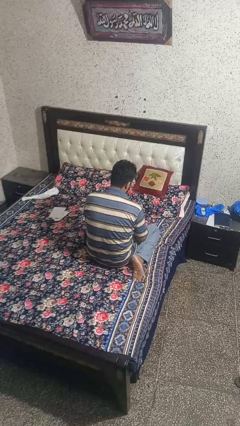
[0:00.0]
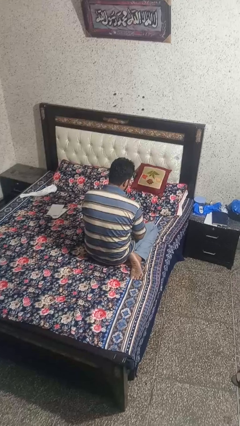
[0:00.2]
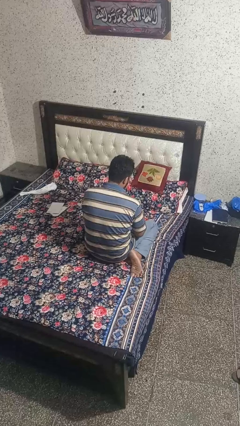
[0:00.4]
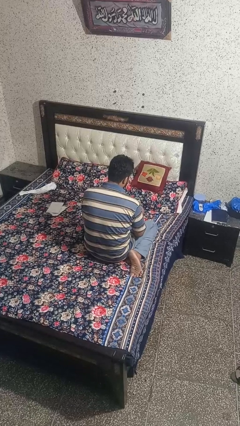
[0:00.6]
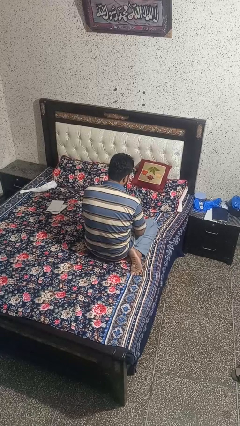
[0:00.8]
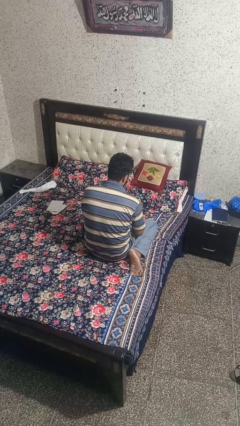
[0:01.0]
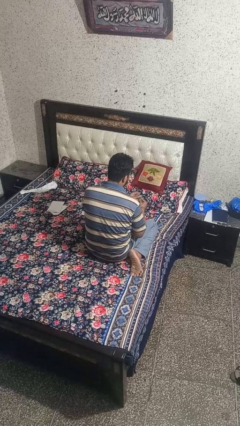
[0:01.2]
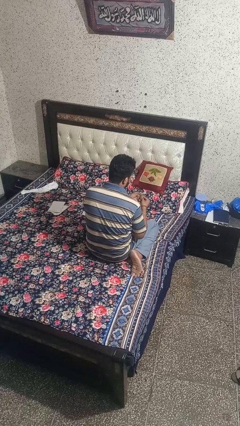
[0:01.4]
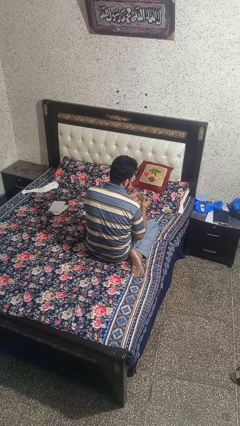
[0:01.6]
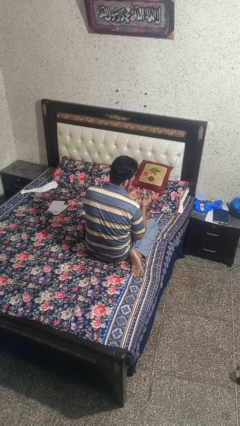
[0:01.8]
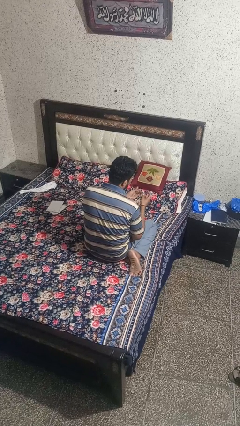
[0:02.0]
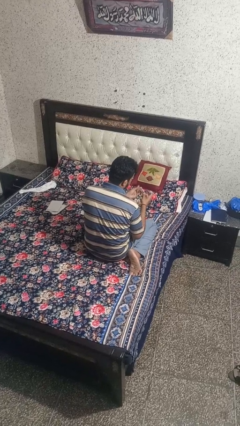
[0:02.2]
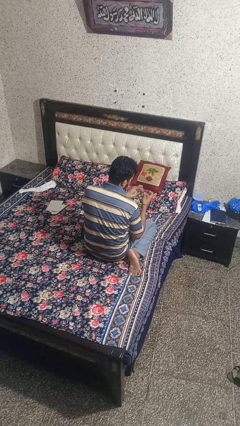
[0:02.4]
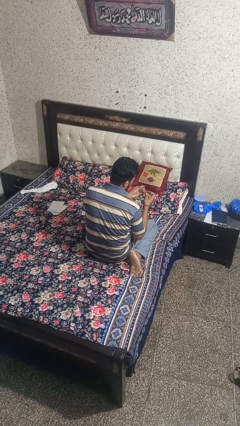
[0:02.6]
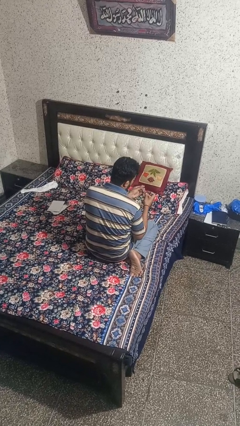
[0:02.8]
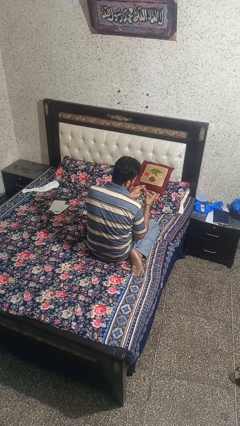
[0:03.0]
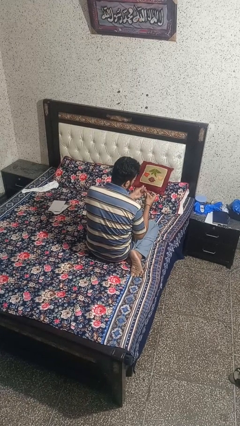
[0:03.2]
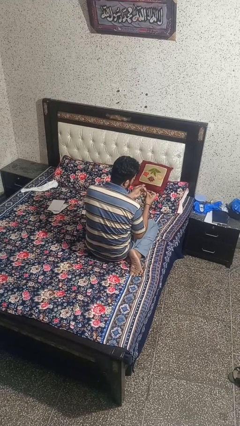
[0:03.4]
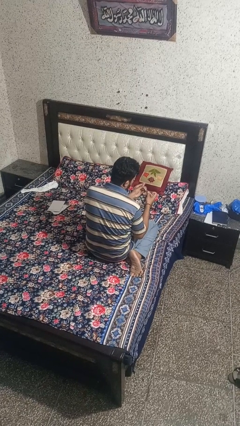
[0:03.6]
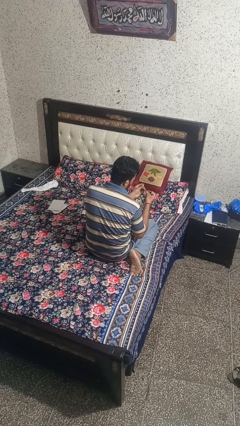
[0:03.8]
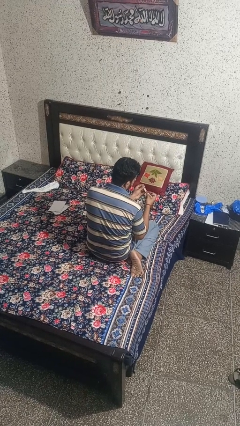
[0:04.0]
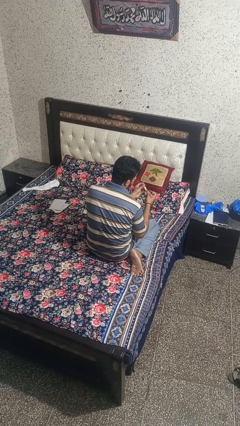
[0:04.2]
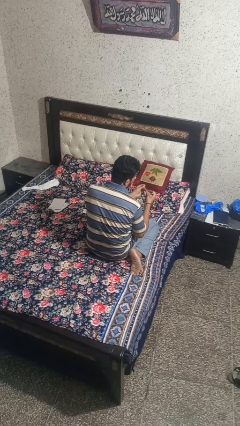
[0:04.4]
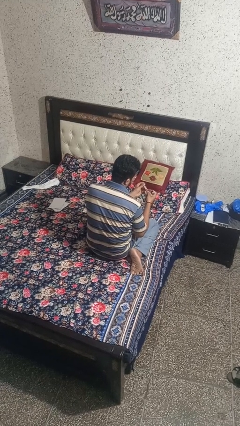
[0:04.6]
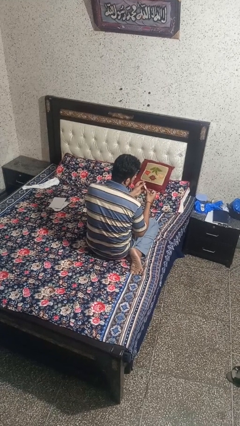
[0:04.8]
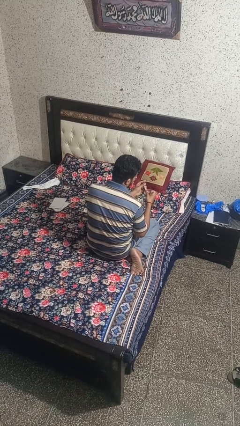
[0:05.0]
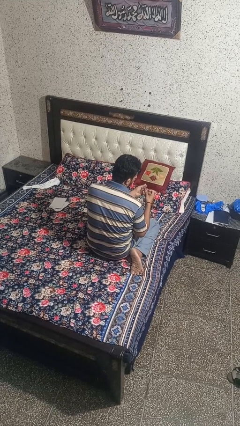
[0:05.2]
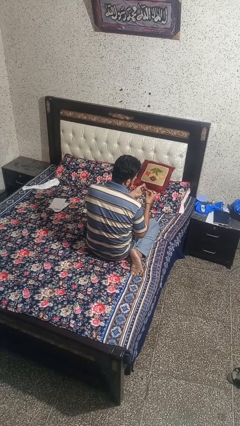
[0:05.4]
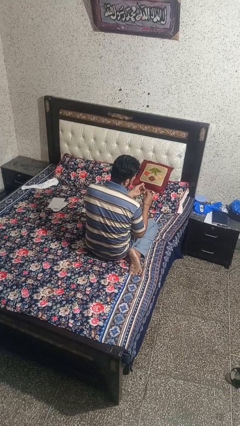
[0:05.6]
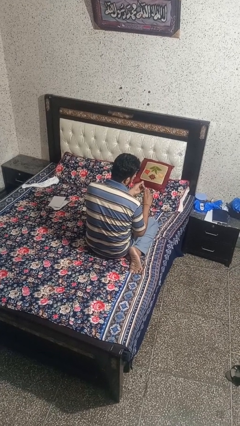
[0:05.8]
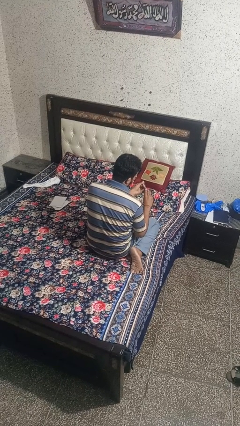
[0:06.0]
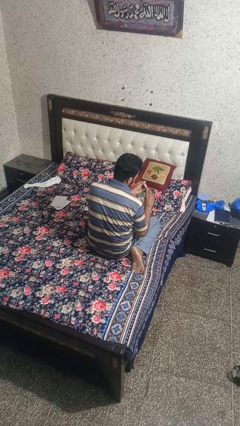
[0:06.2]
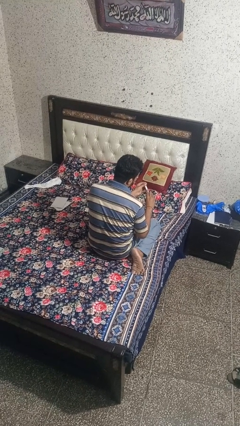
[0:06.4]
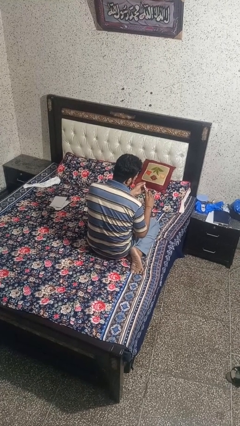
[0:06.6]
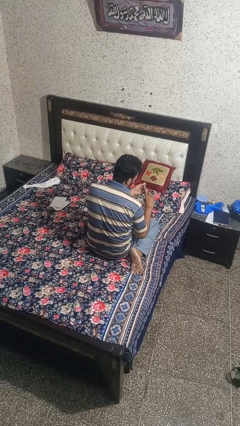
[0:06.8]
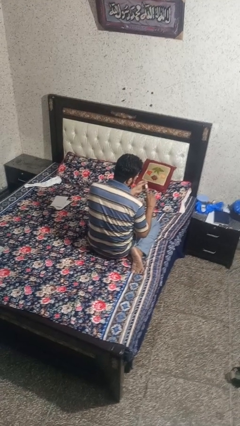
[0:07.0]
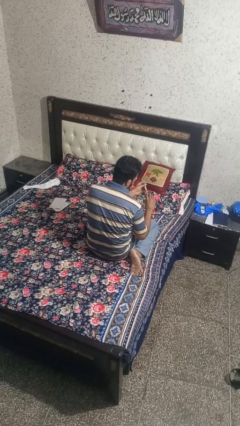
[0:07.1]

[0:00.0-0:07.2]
person clips fingernails

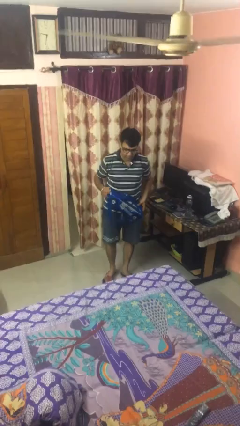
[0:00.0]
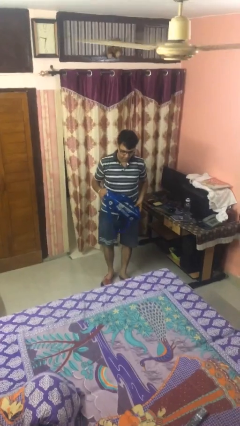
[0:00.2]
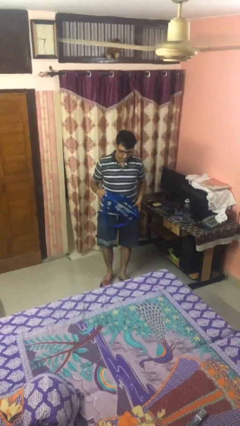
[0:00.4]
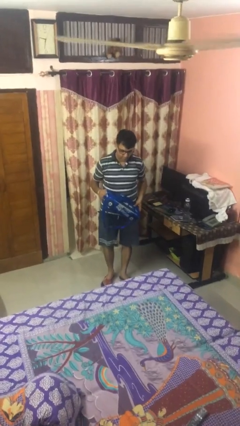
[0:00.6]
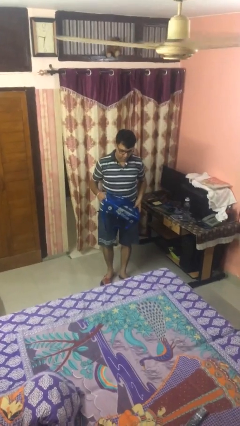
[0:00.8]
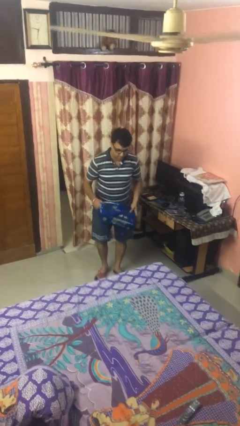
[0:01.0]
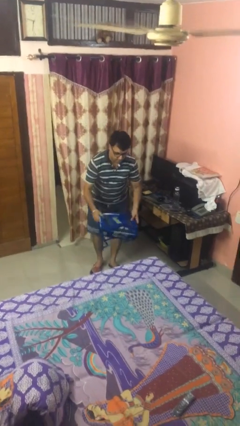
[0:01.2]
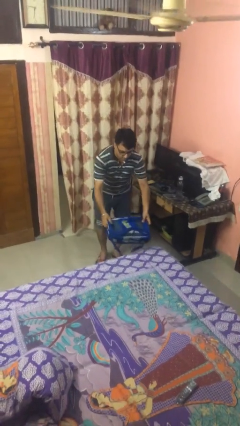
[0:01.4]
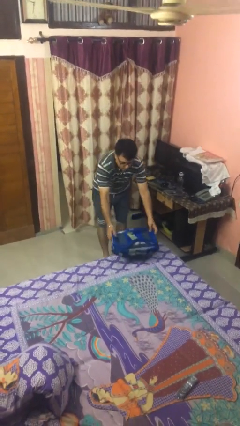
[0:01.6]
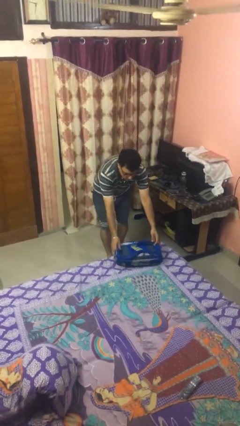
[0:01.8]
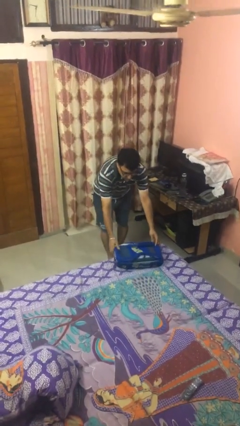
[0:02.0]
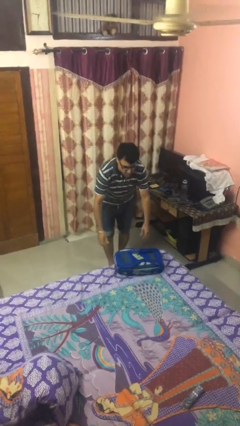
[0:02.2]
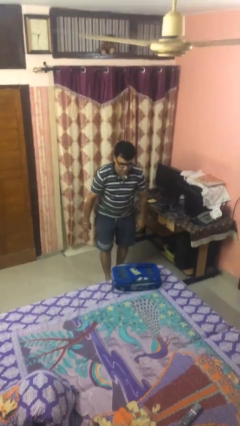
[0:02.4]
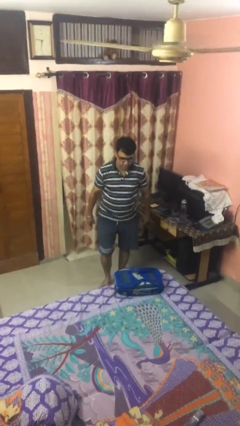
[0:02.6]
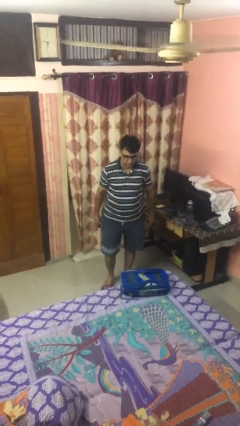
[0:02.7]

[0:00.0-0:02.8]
person puts down object on bed

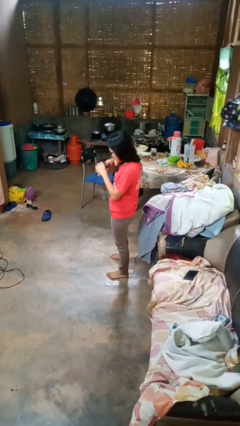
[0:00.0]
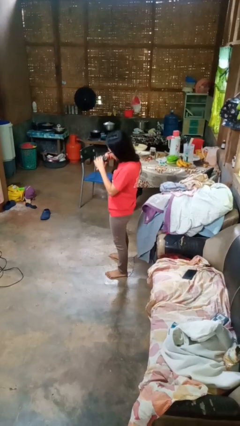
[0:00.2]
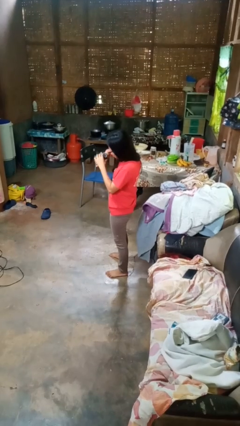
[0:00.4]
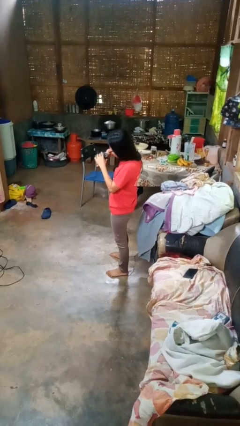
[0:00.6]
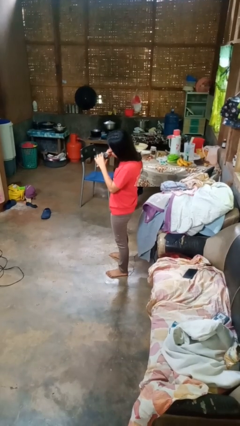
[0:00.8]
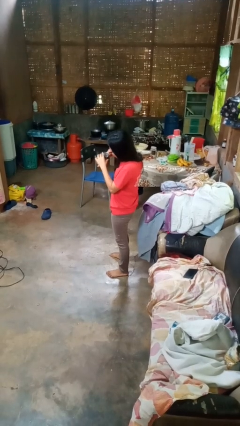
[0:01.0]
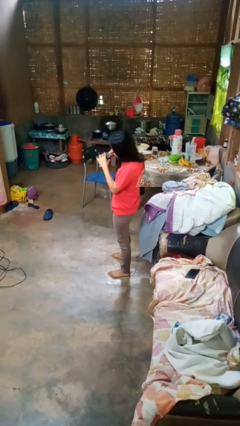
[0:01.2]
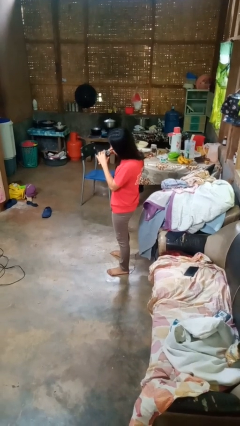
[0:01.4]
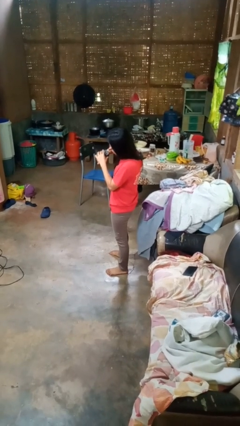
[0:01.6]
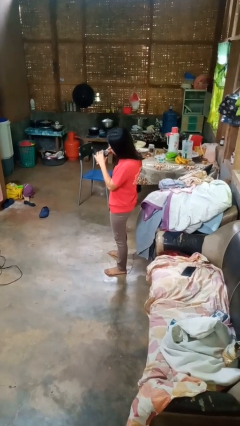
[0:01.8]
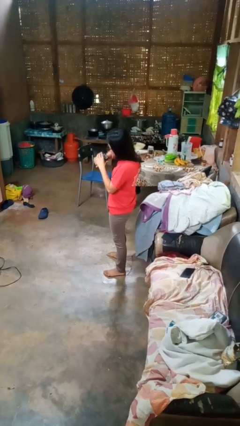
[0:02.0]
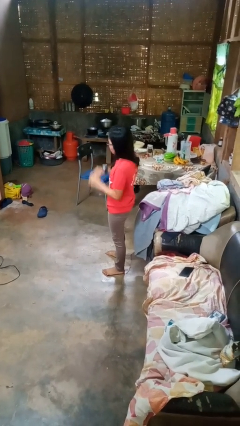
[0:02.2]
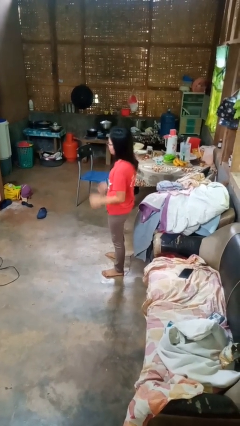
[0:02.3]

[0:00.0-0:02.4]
person looks at wristwatch

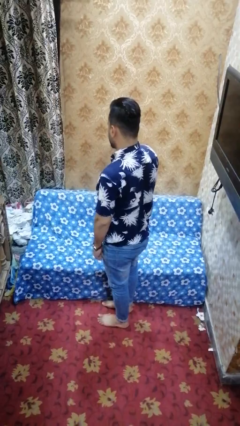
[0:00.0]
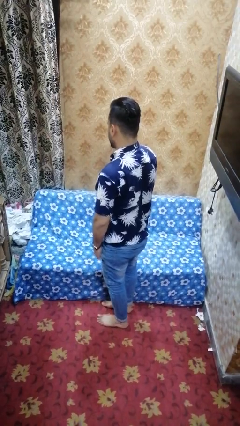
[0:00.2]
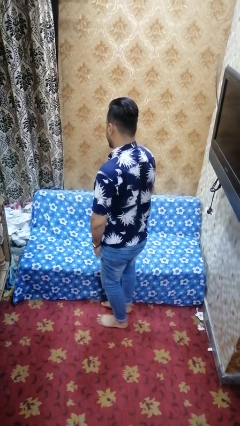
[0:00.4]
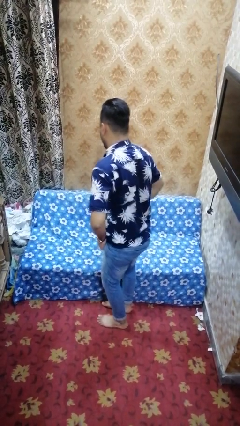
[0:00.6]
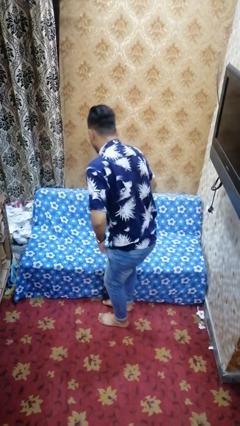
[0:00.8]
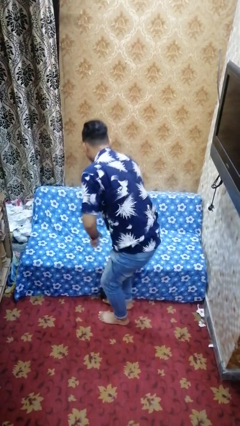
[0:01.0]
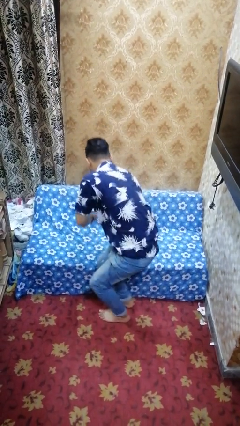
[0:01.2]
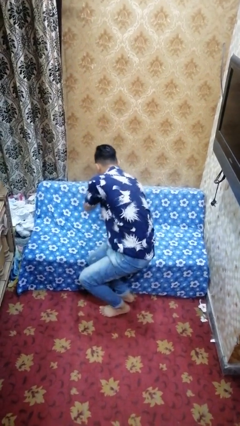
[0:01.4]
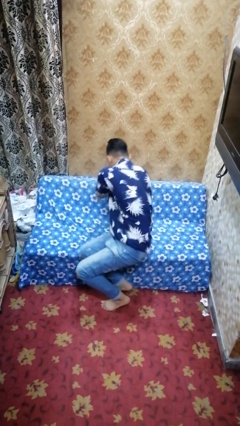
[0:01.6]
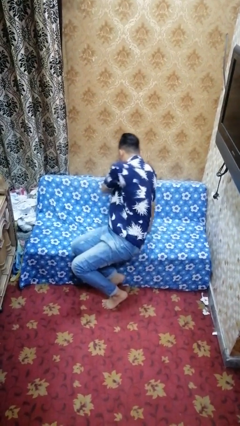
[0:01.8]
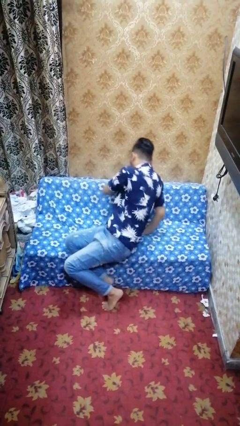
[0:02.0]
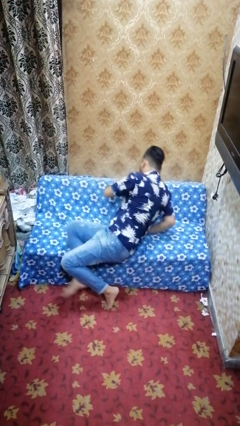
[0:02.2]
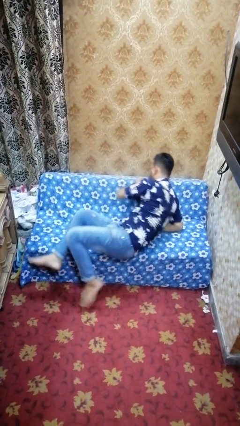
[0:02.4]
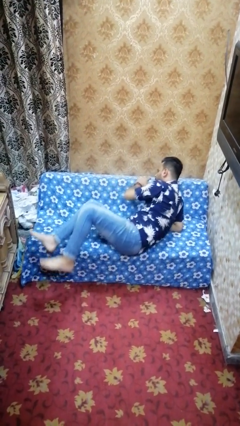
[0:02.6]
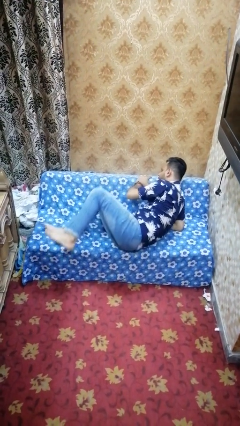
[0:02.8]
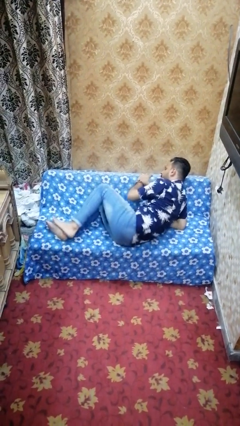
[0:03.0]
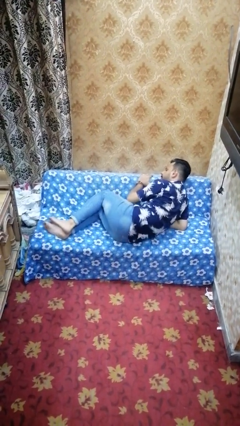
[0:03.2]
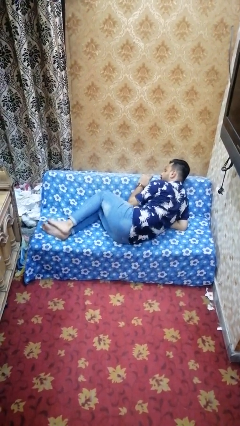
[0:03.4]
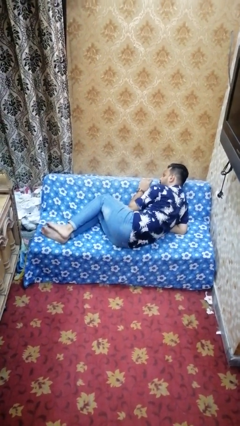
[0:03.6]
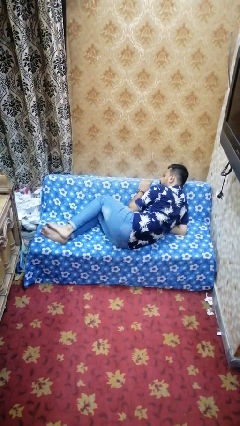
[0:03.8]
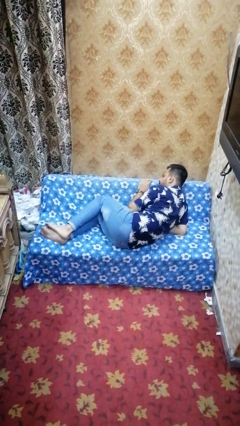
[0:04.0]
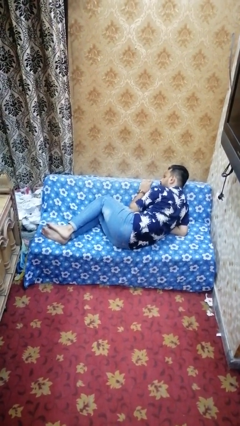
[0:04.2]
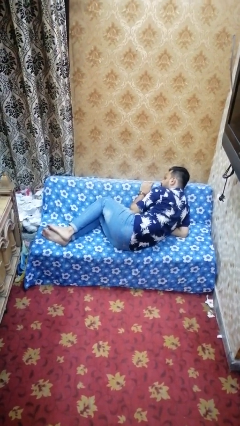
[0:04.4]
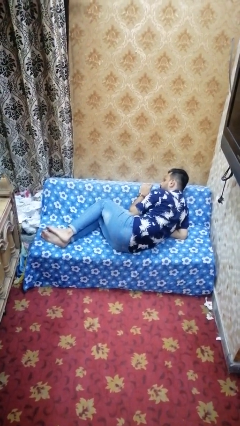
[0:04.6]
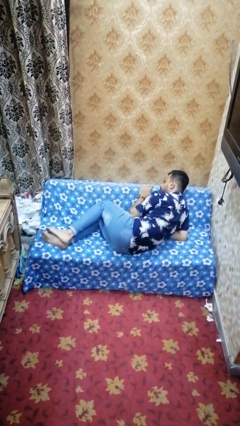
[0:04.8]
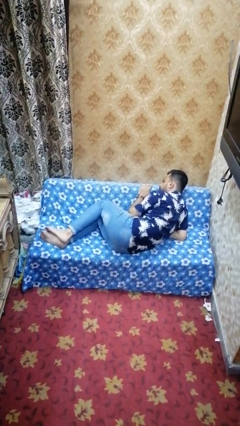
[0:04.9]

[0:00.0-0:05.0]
person lies down on couch
